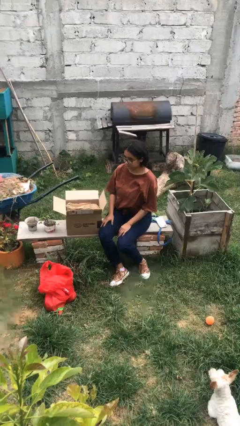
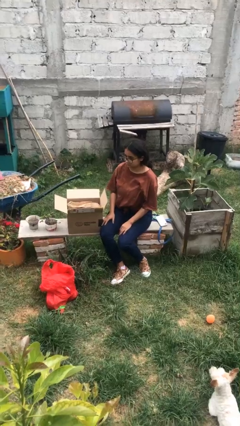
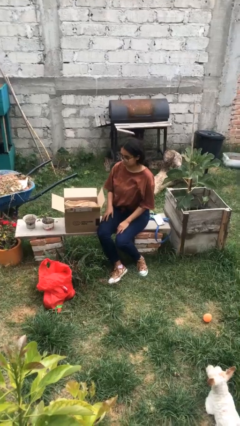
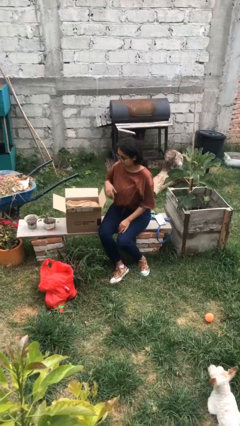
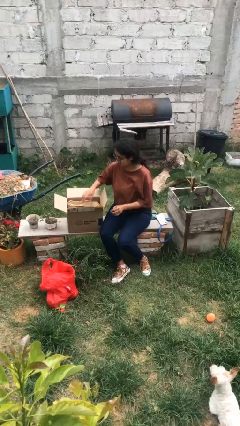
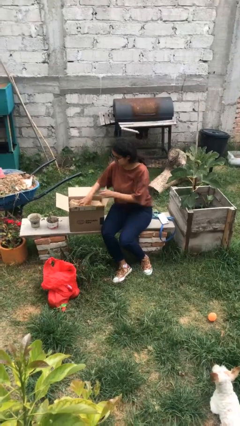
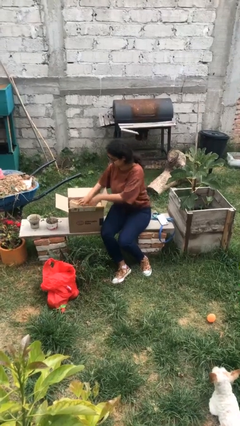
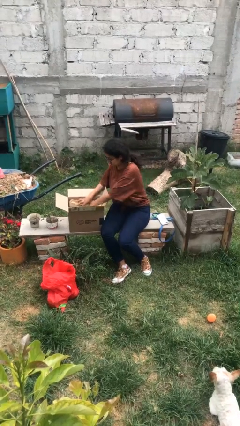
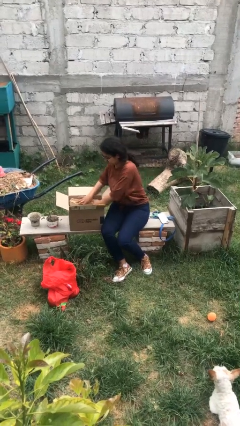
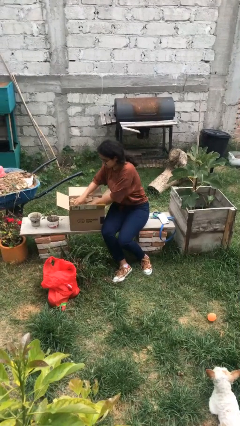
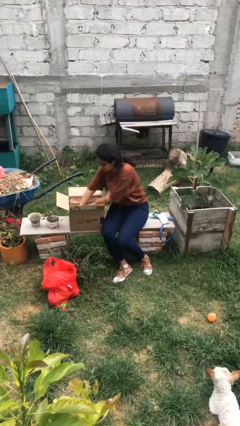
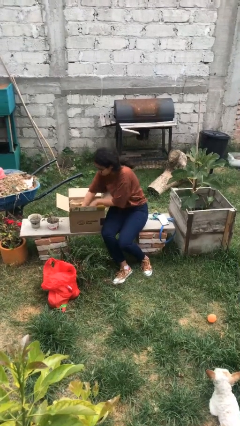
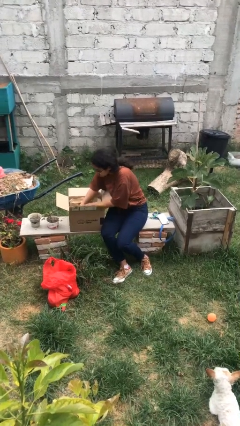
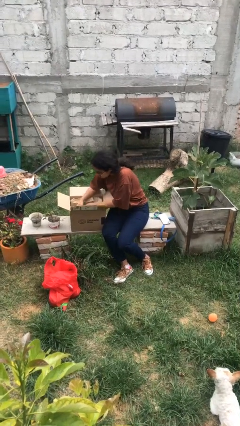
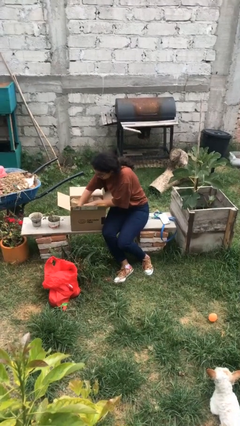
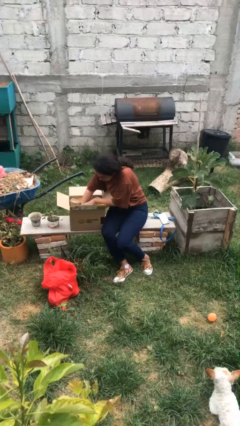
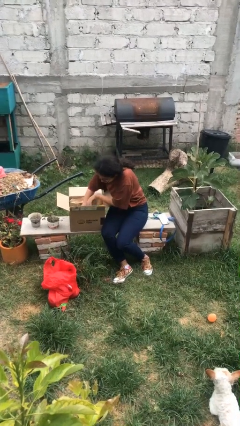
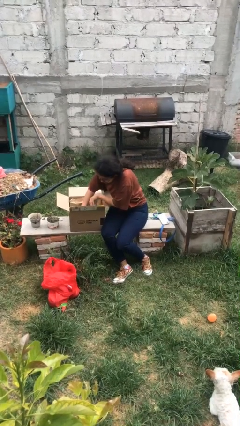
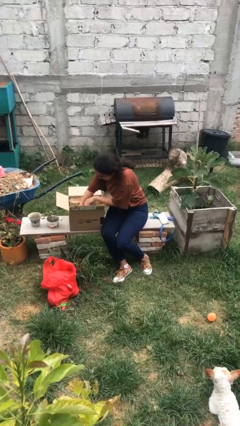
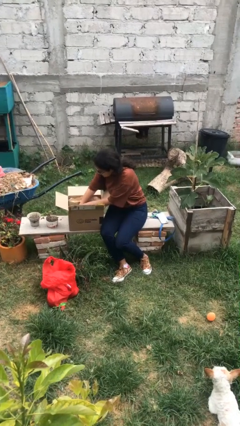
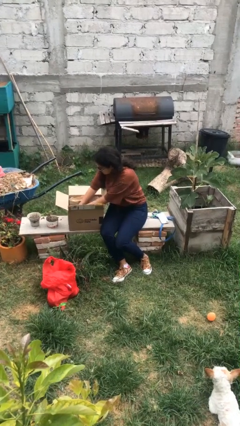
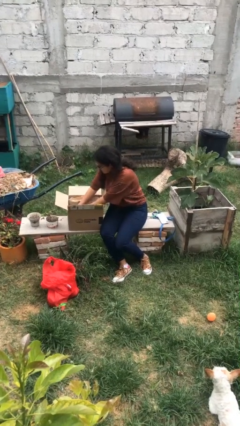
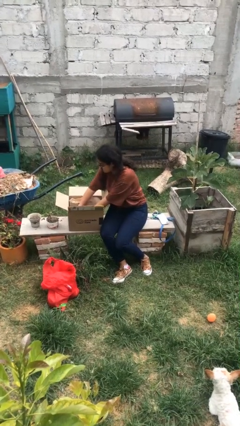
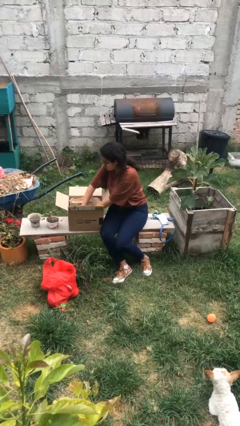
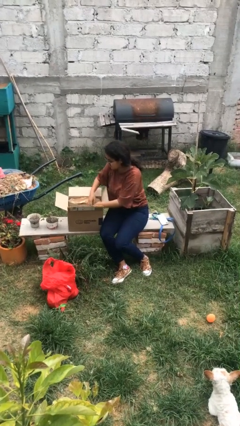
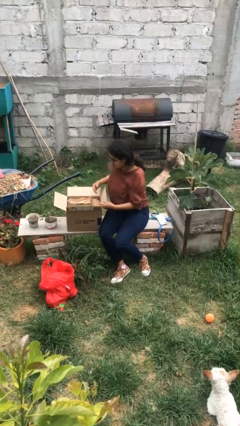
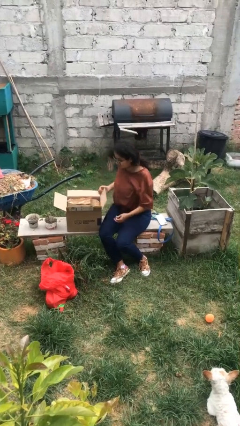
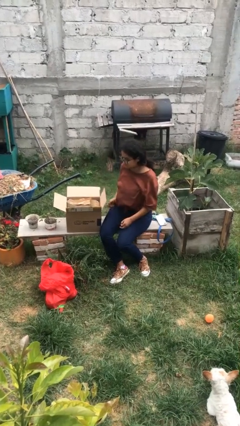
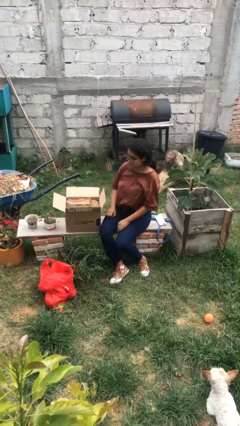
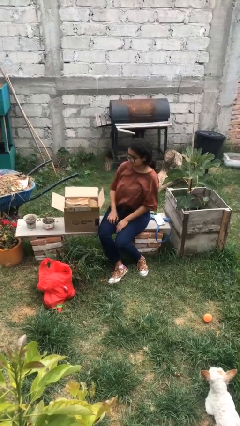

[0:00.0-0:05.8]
person searches in box

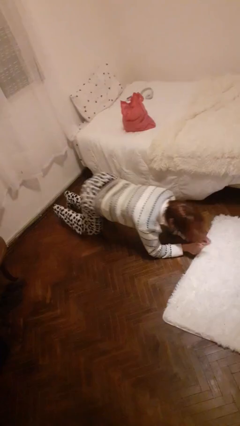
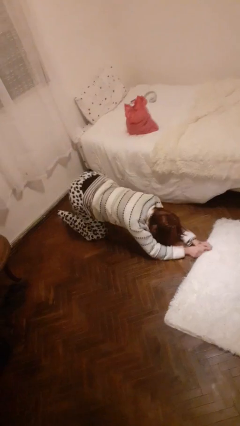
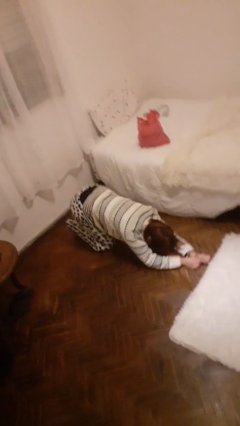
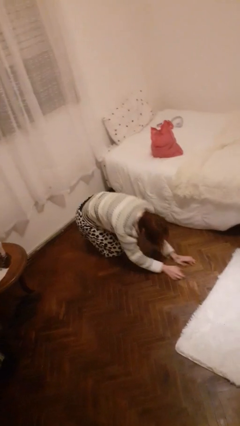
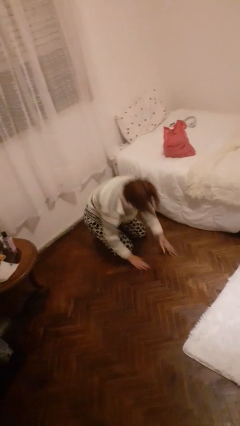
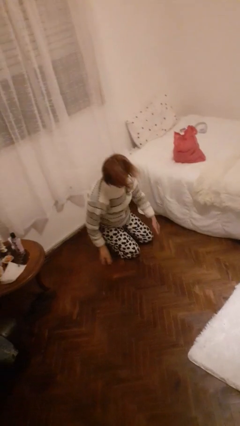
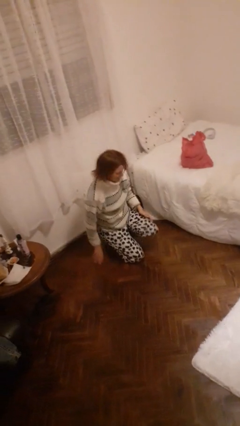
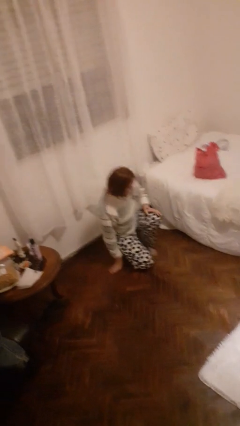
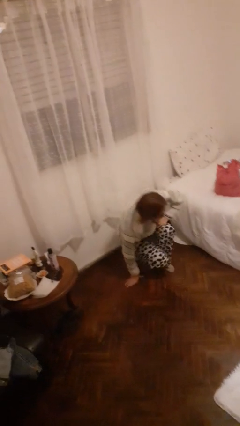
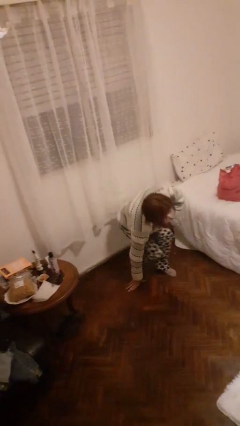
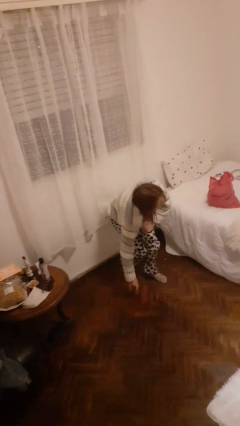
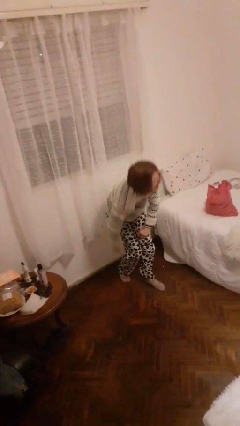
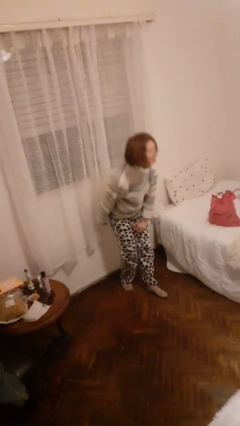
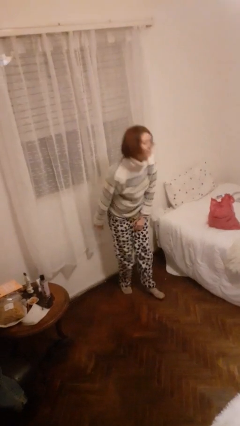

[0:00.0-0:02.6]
person stands up from floor

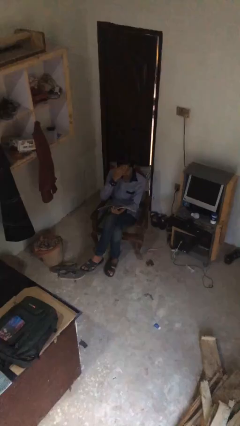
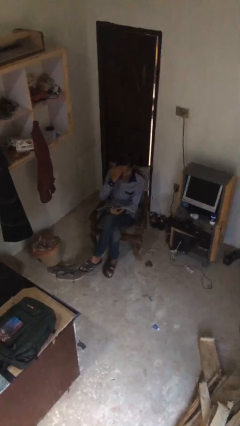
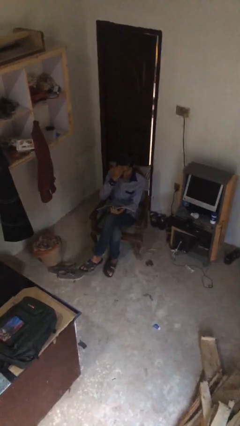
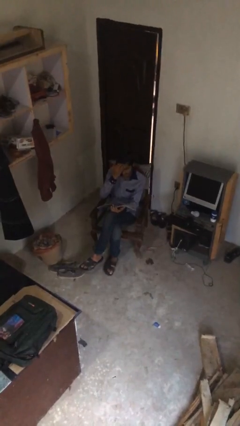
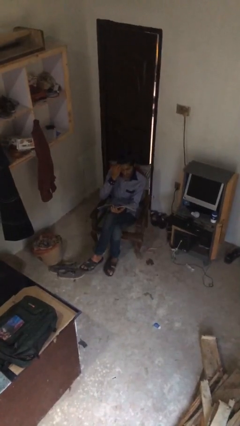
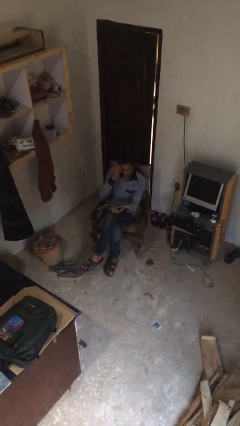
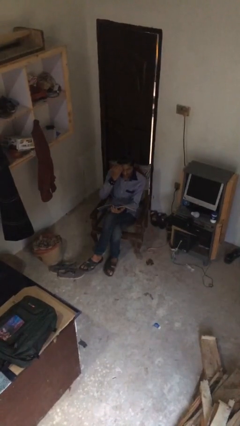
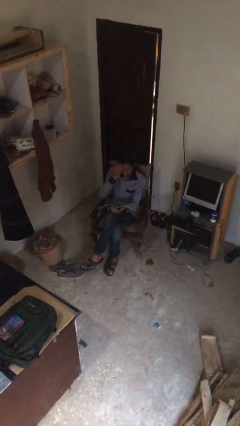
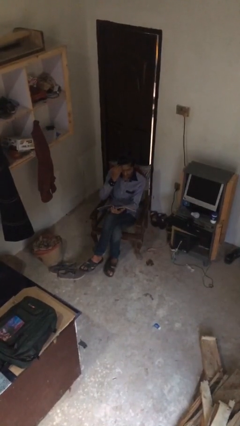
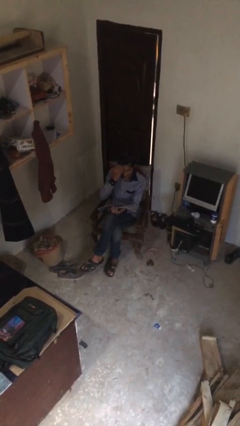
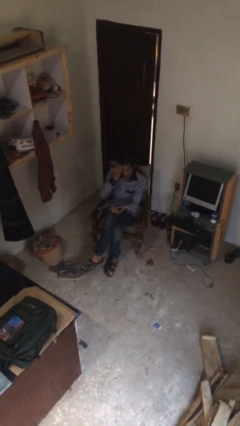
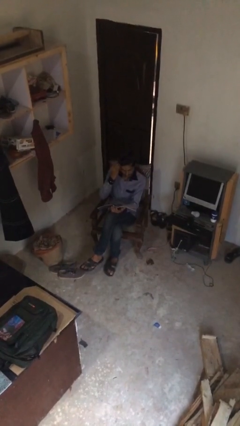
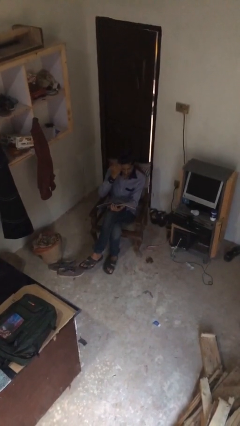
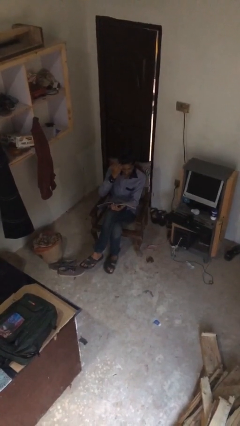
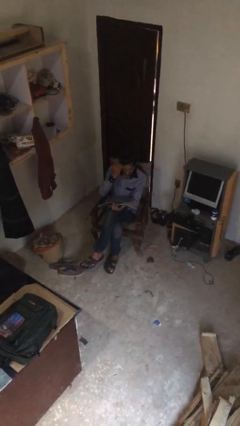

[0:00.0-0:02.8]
person reads document

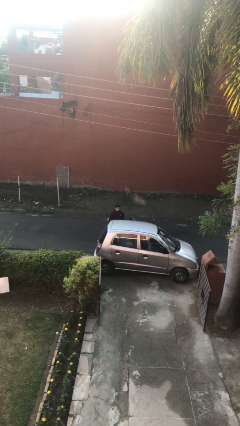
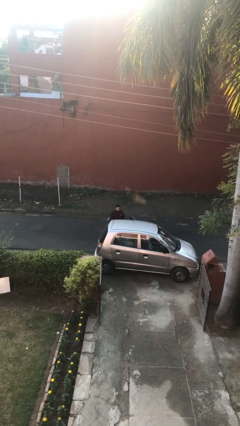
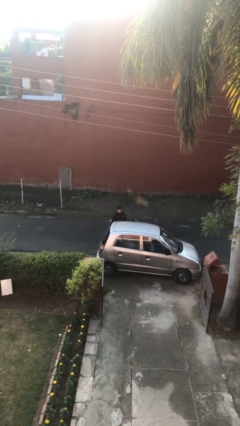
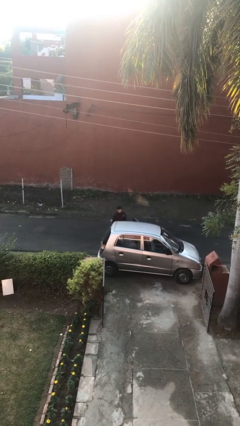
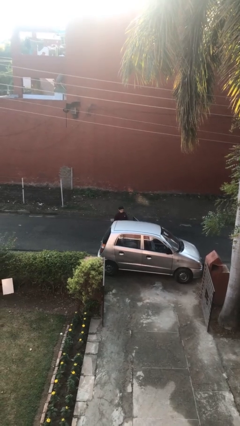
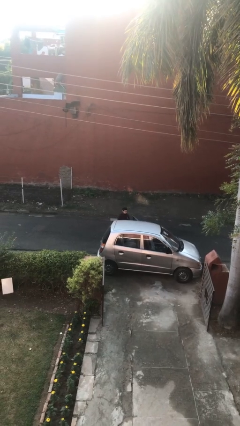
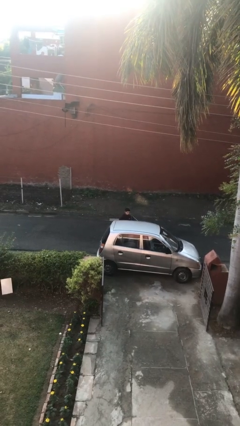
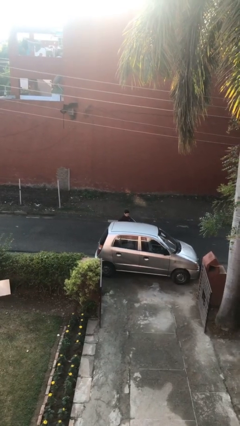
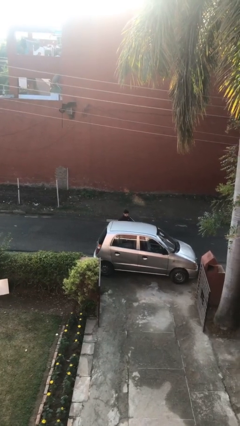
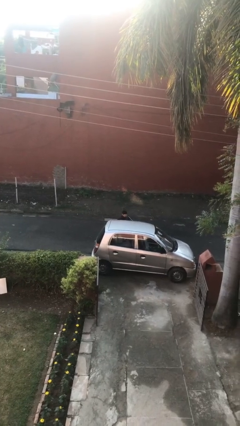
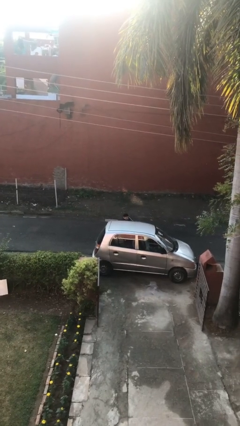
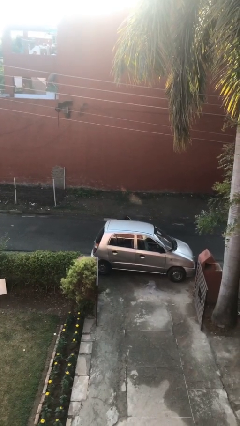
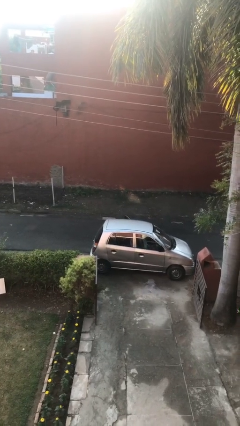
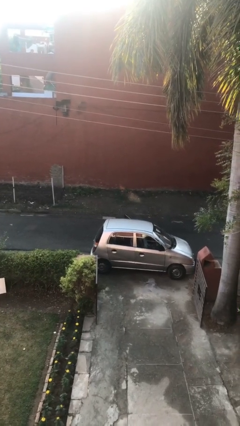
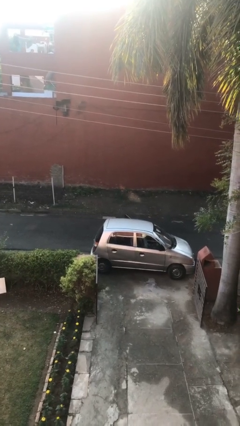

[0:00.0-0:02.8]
person enters car

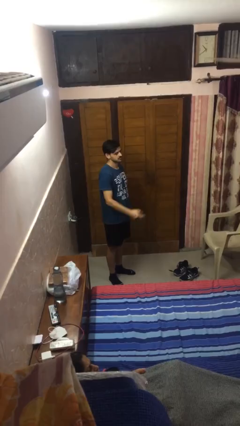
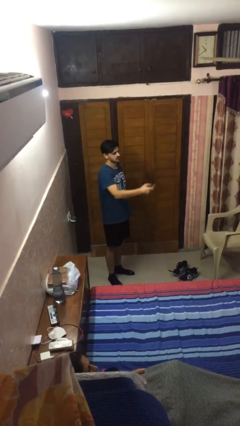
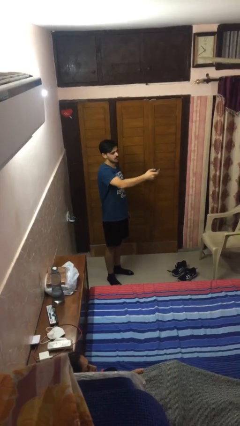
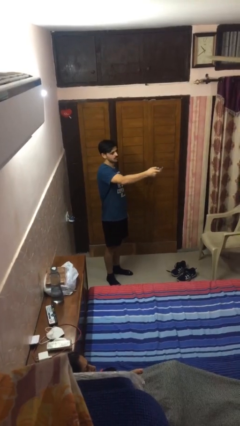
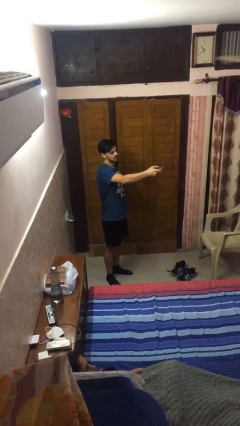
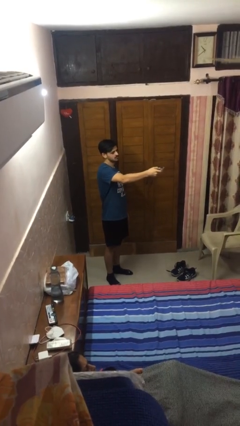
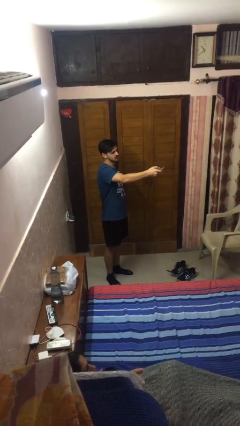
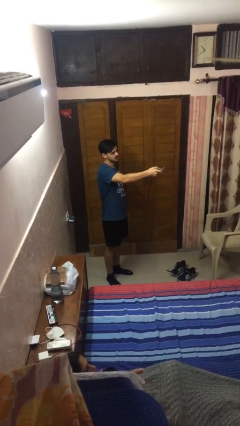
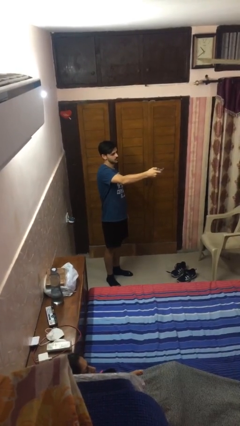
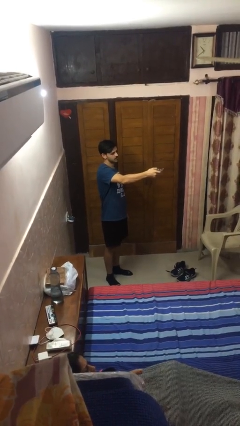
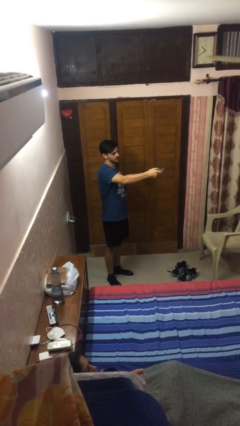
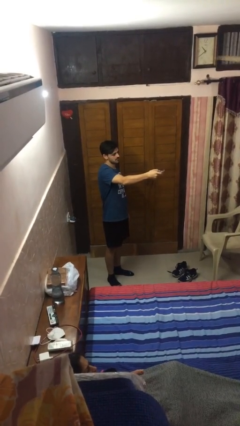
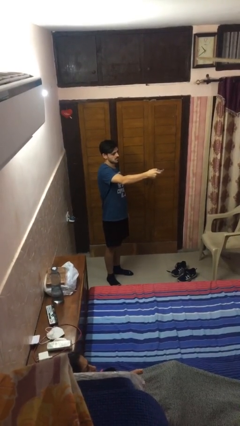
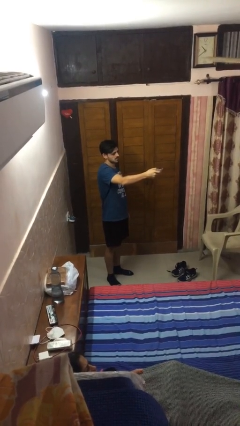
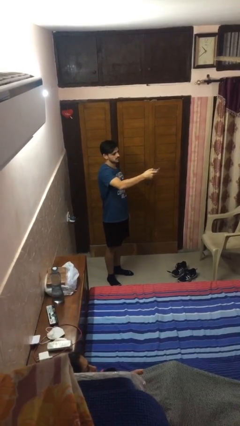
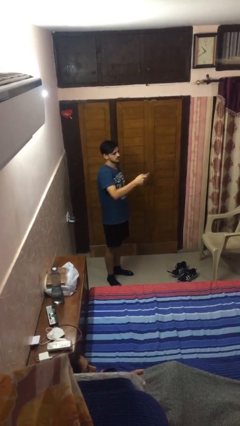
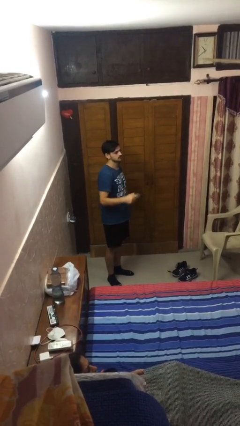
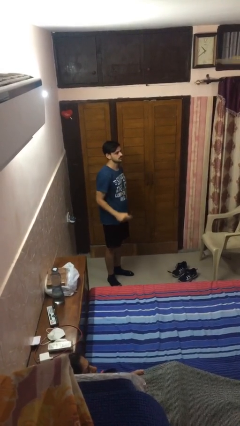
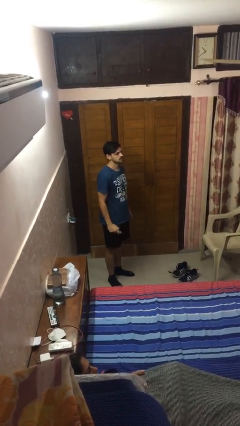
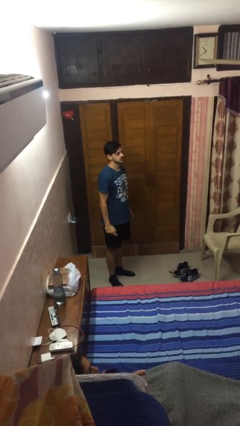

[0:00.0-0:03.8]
person uses television remote
